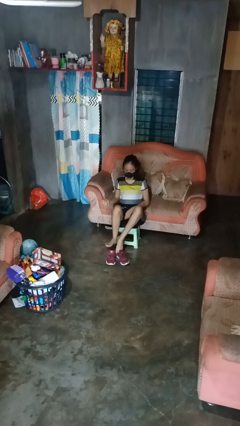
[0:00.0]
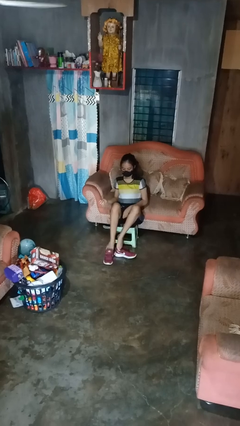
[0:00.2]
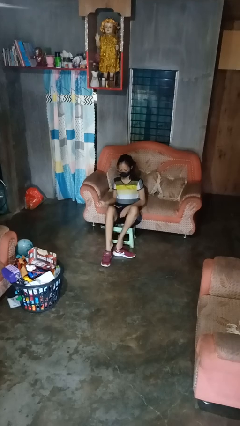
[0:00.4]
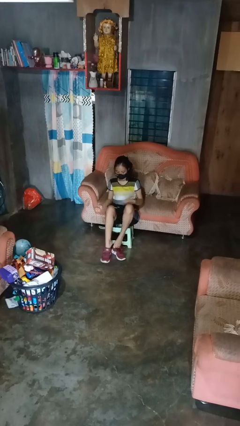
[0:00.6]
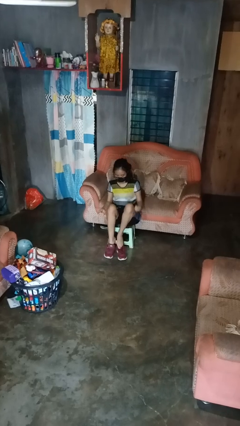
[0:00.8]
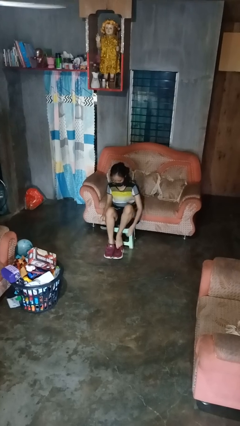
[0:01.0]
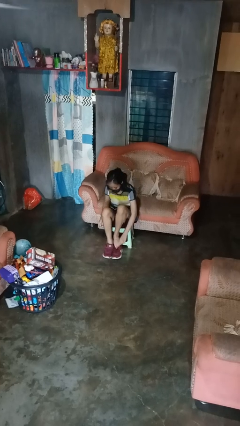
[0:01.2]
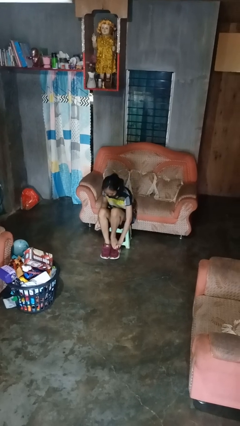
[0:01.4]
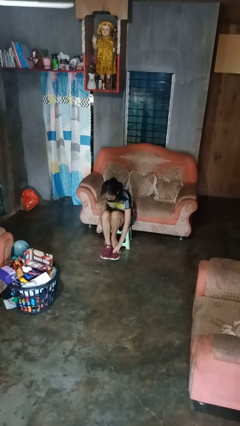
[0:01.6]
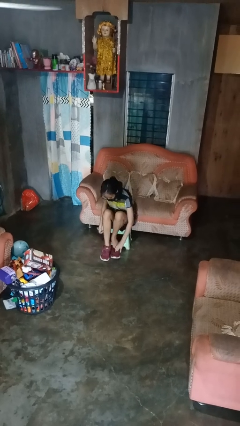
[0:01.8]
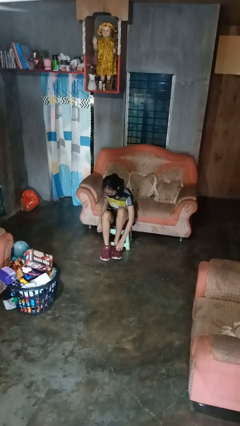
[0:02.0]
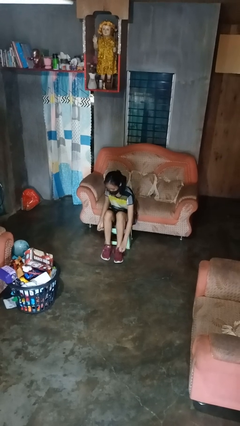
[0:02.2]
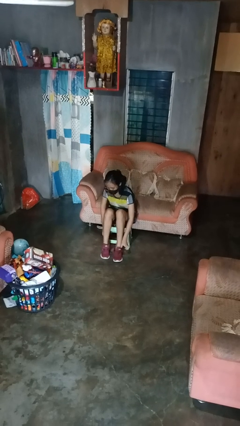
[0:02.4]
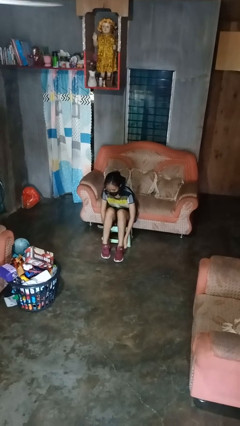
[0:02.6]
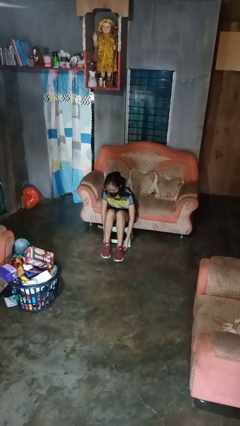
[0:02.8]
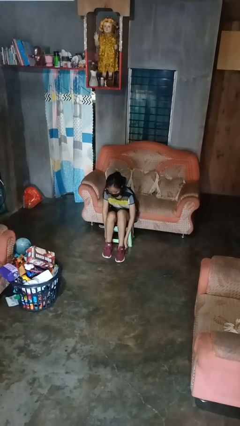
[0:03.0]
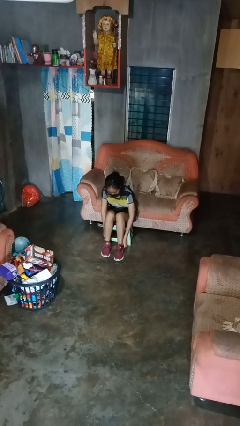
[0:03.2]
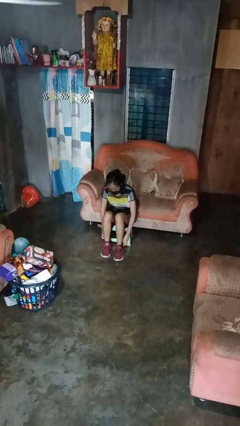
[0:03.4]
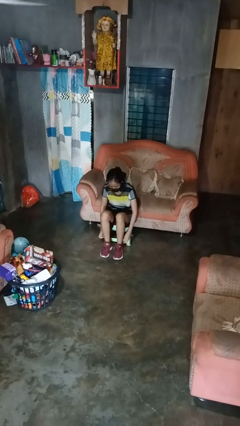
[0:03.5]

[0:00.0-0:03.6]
person puts on shoes

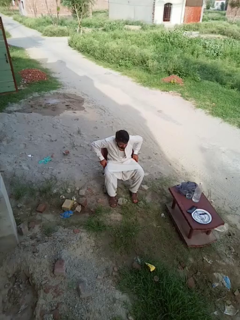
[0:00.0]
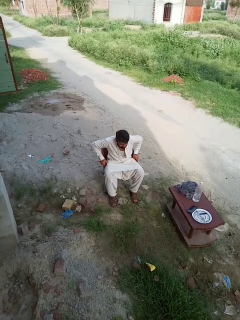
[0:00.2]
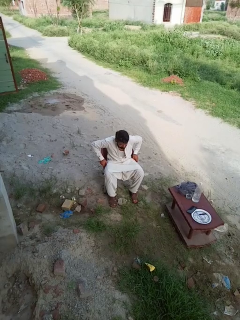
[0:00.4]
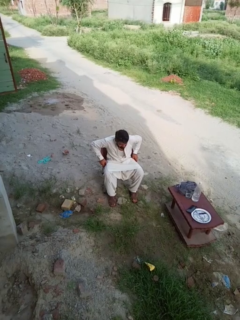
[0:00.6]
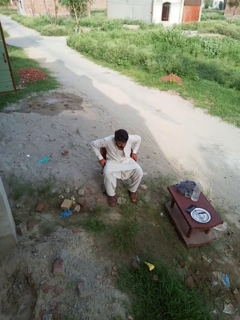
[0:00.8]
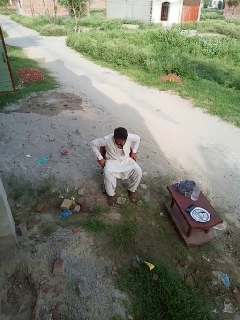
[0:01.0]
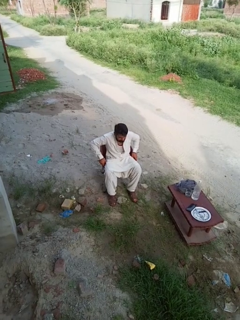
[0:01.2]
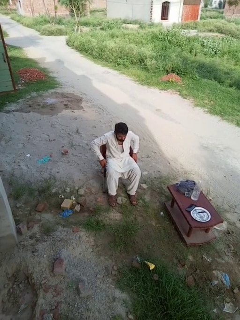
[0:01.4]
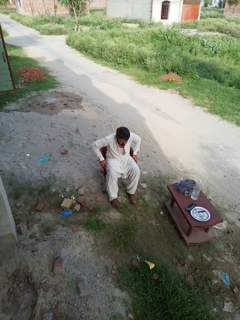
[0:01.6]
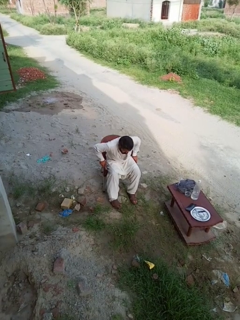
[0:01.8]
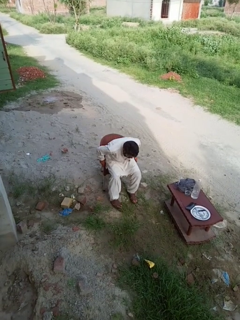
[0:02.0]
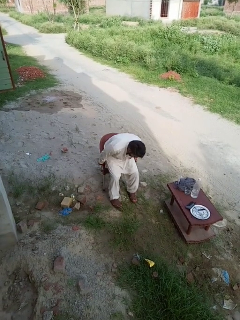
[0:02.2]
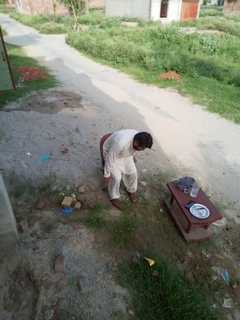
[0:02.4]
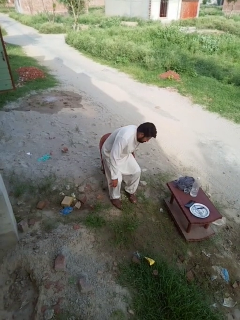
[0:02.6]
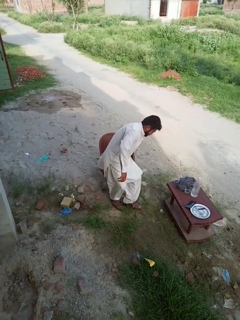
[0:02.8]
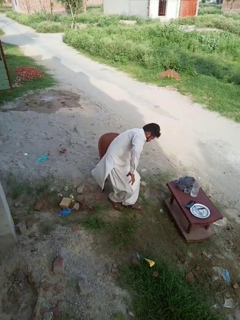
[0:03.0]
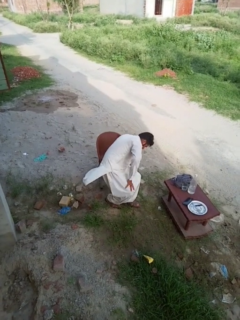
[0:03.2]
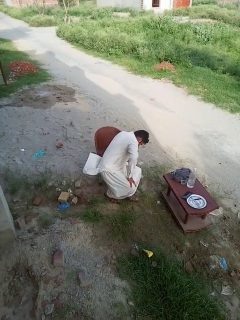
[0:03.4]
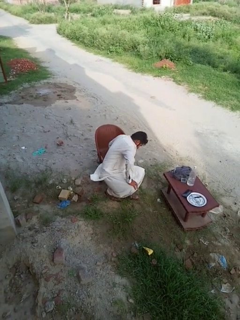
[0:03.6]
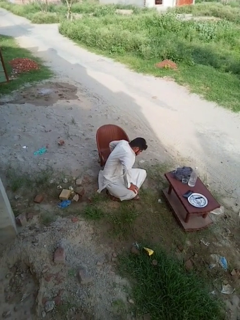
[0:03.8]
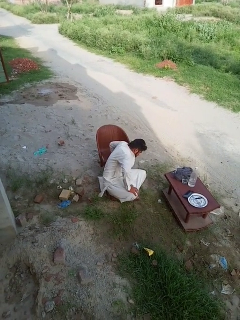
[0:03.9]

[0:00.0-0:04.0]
person falls from chair

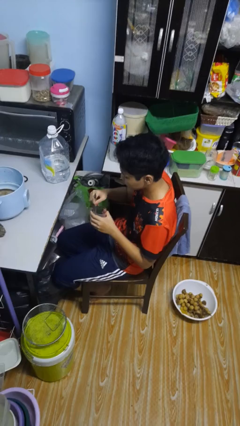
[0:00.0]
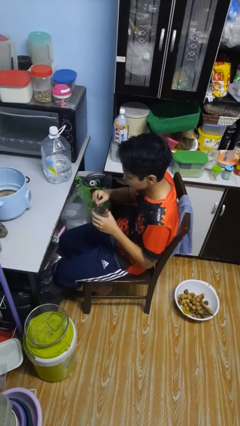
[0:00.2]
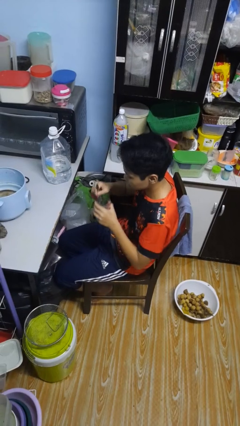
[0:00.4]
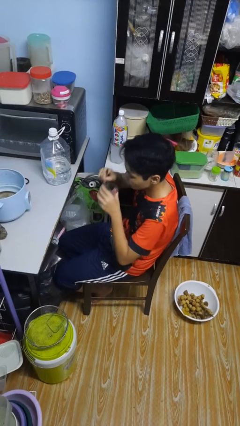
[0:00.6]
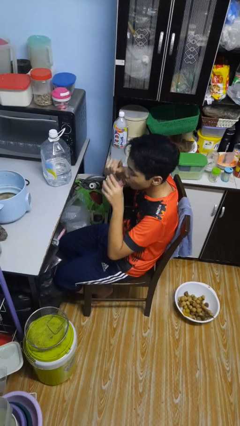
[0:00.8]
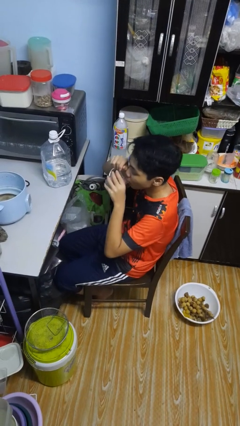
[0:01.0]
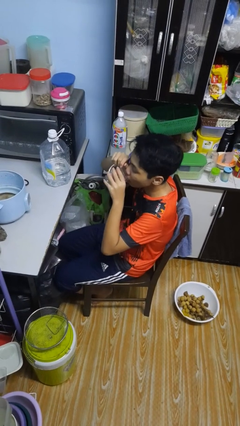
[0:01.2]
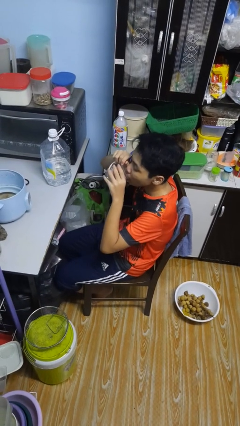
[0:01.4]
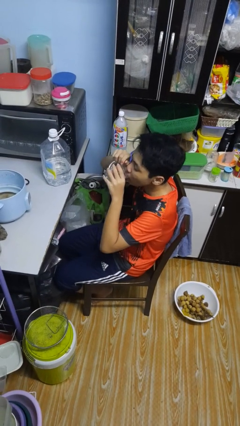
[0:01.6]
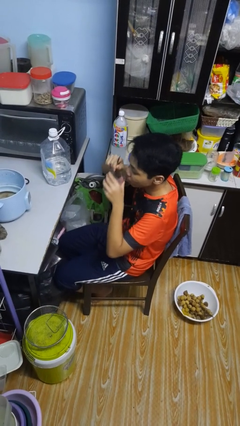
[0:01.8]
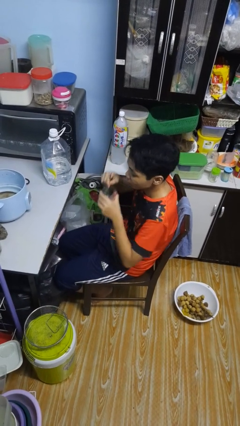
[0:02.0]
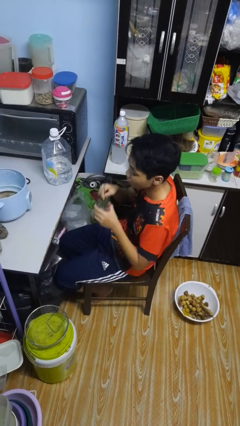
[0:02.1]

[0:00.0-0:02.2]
person drinks from mug

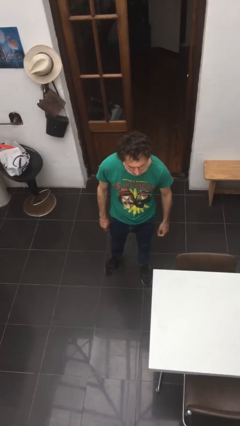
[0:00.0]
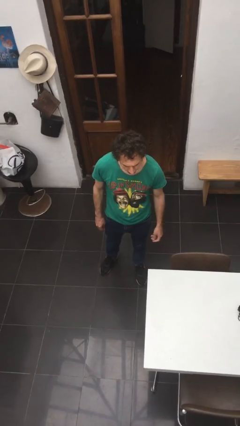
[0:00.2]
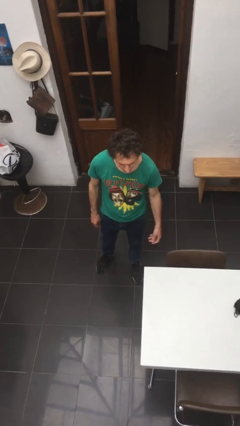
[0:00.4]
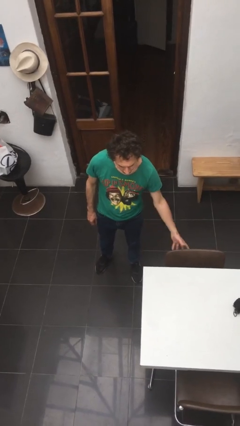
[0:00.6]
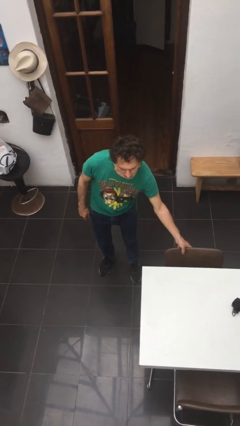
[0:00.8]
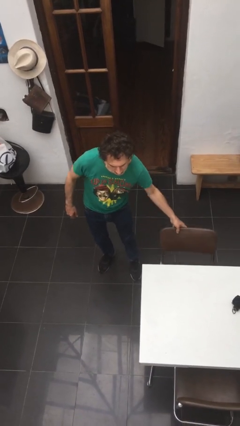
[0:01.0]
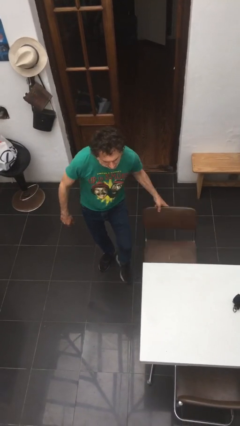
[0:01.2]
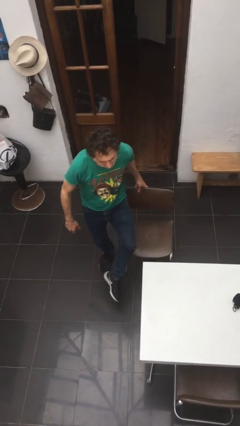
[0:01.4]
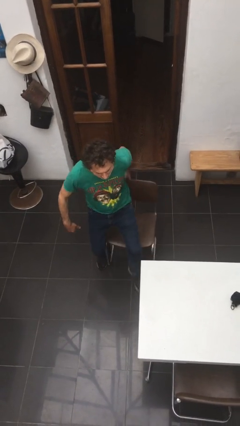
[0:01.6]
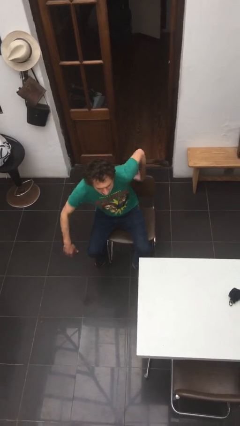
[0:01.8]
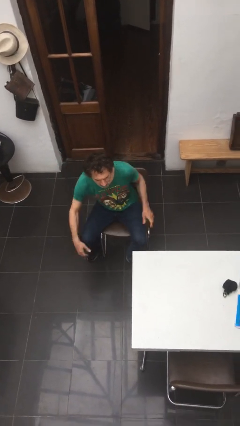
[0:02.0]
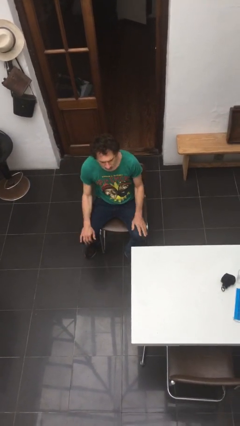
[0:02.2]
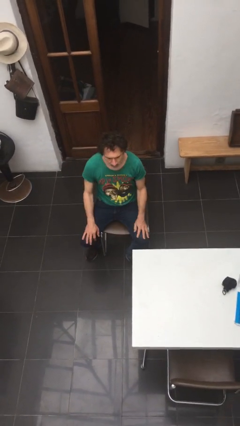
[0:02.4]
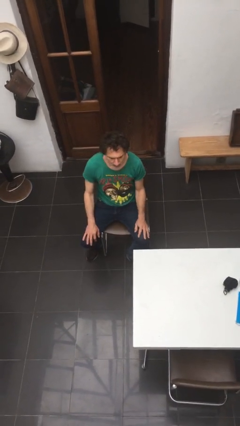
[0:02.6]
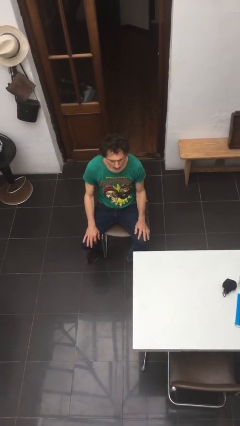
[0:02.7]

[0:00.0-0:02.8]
person sits down

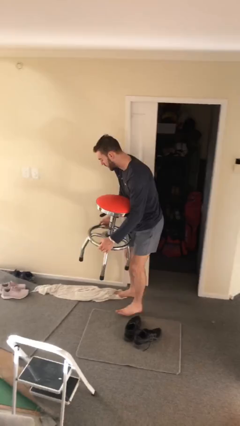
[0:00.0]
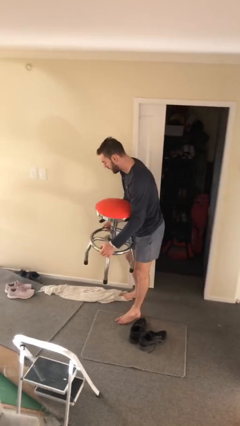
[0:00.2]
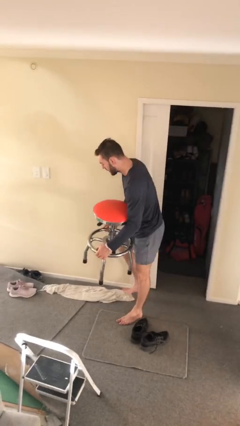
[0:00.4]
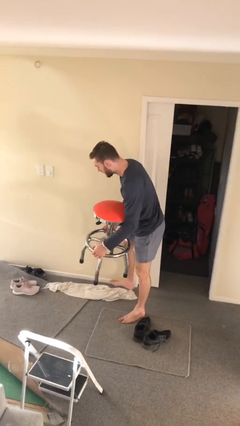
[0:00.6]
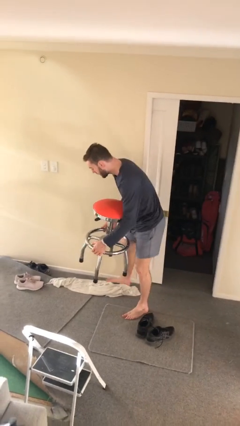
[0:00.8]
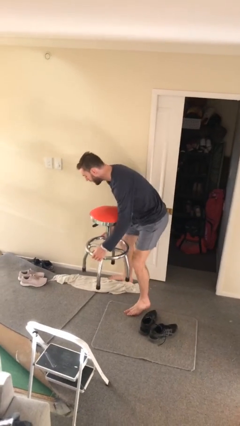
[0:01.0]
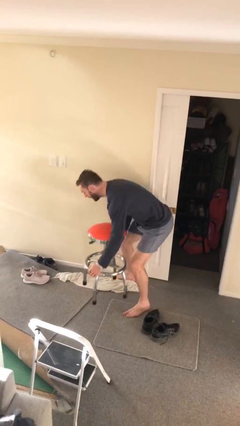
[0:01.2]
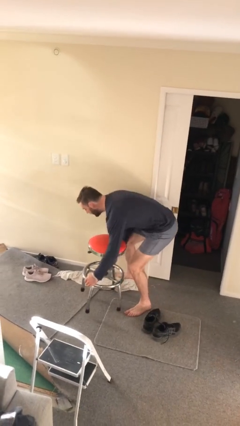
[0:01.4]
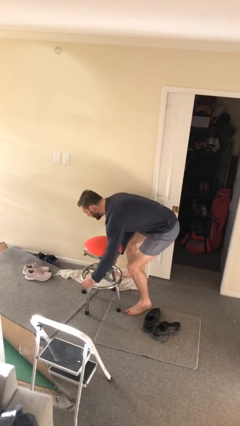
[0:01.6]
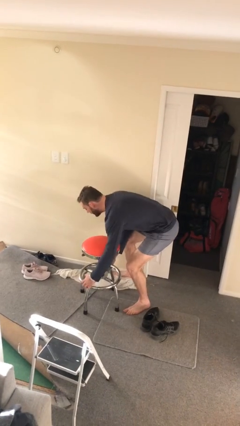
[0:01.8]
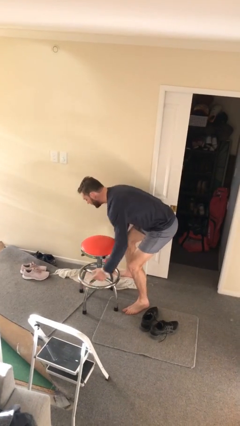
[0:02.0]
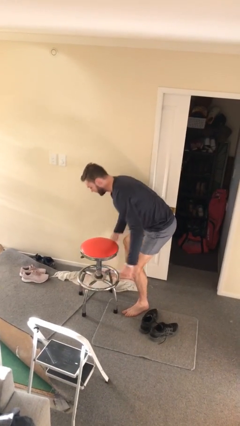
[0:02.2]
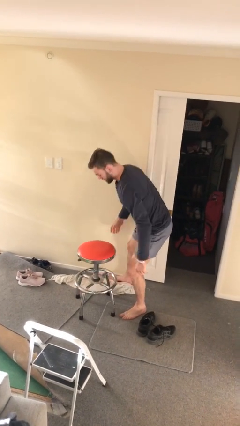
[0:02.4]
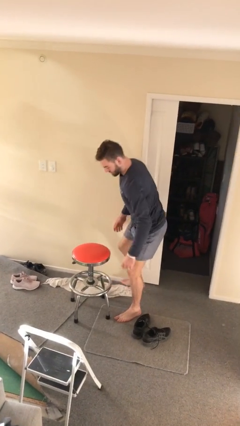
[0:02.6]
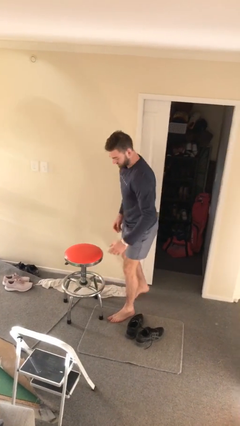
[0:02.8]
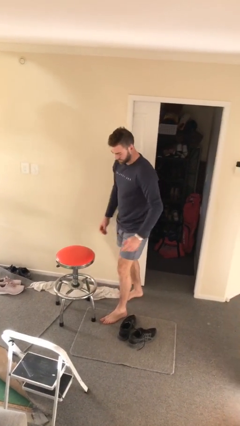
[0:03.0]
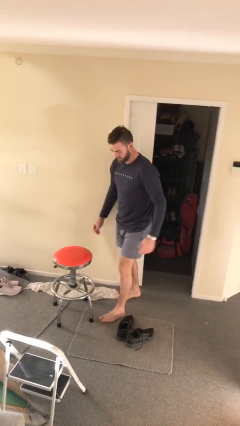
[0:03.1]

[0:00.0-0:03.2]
person puts down object on floor

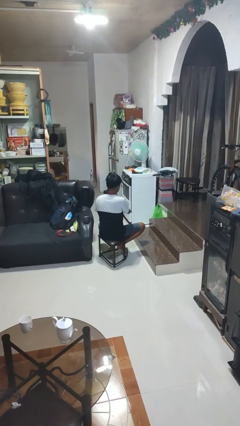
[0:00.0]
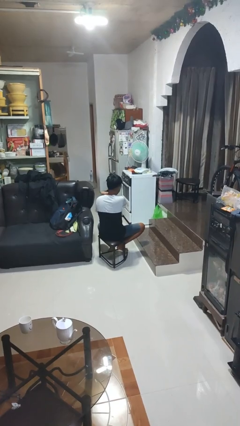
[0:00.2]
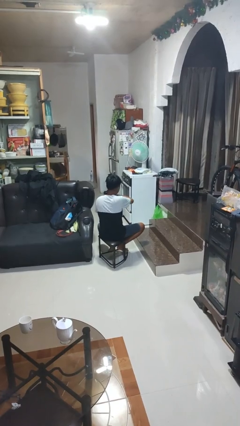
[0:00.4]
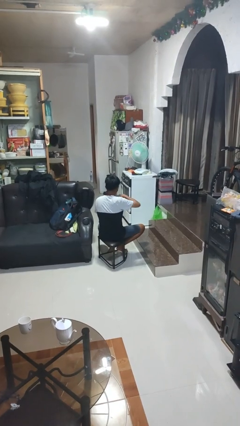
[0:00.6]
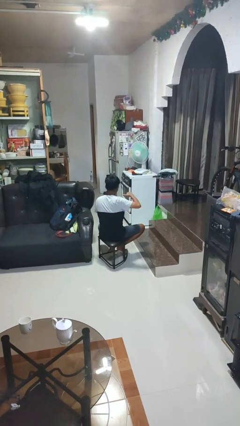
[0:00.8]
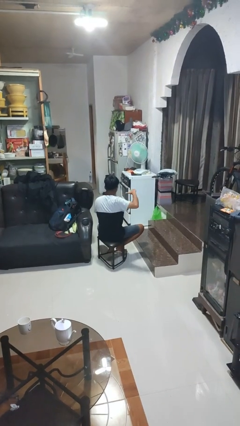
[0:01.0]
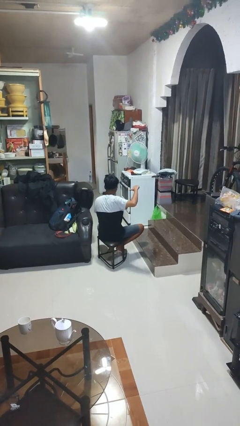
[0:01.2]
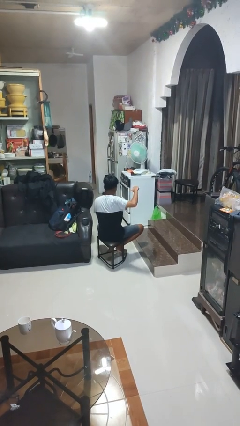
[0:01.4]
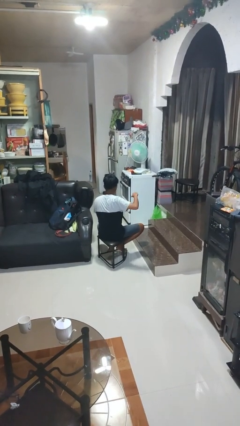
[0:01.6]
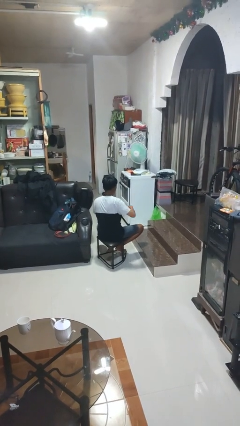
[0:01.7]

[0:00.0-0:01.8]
person gestures cut

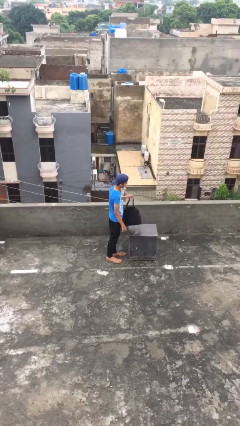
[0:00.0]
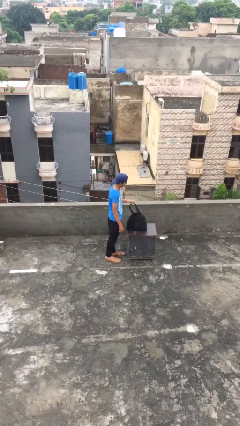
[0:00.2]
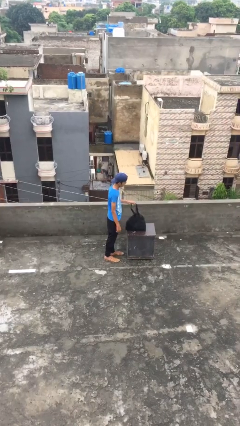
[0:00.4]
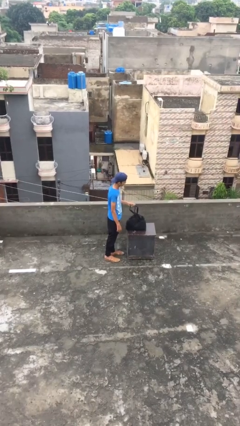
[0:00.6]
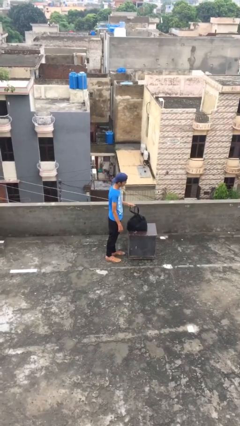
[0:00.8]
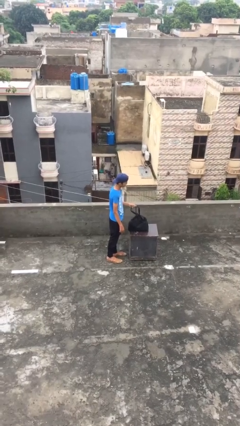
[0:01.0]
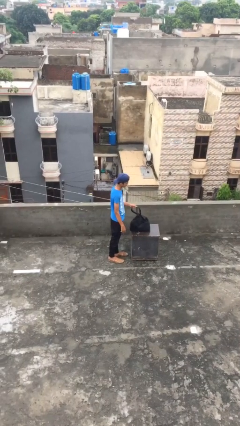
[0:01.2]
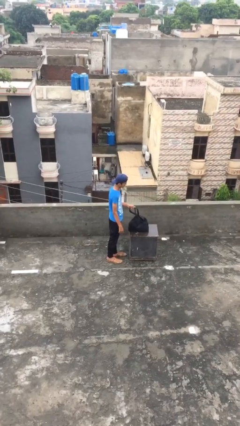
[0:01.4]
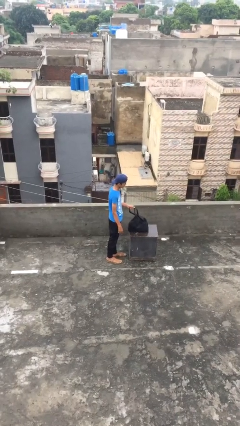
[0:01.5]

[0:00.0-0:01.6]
person puts down object on table